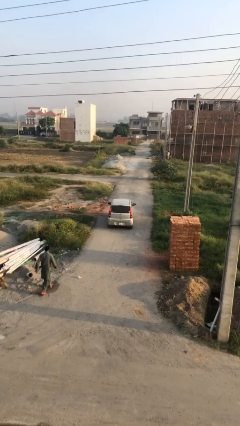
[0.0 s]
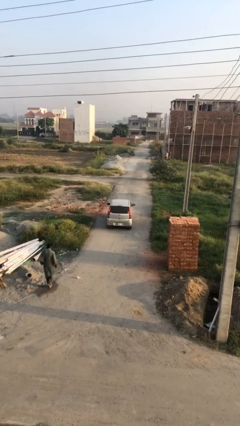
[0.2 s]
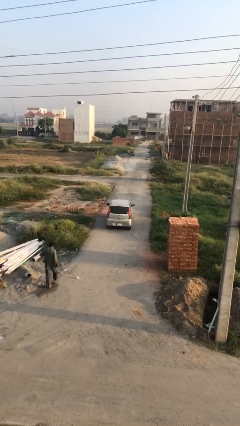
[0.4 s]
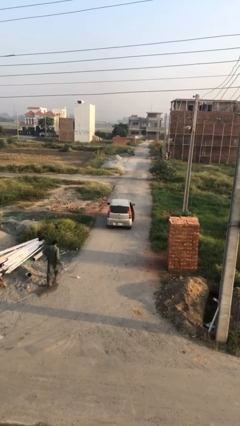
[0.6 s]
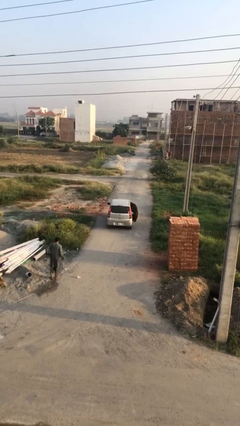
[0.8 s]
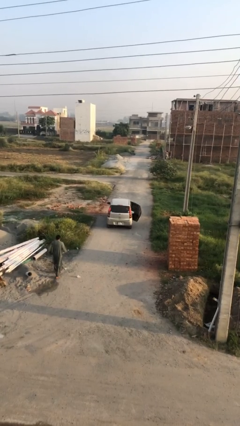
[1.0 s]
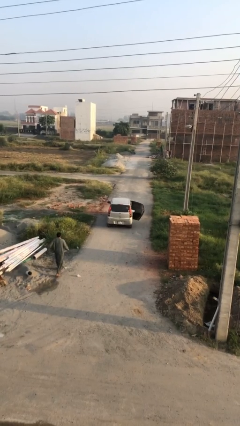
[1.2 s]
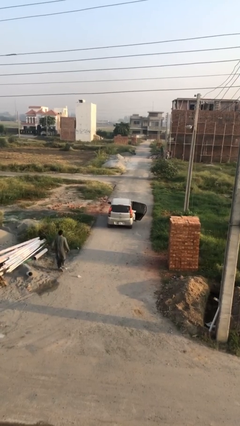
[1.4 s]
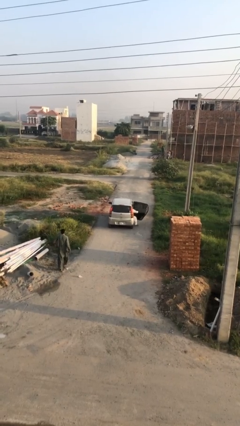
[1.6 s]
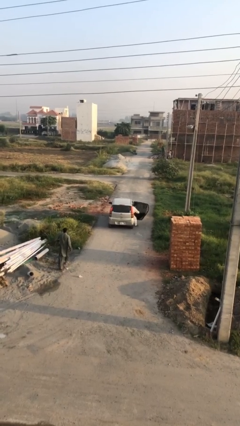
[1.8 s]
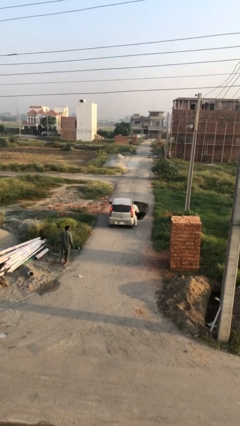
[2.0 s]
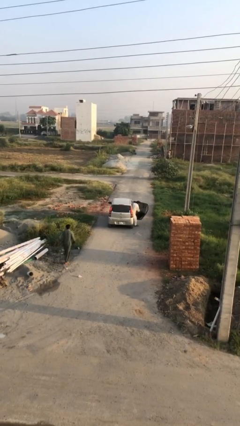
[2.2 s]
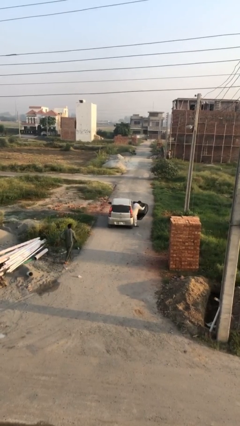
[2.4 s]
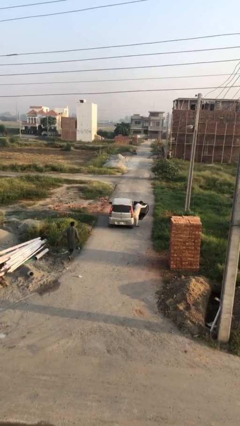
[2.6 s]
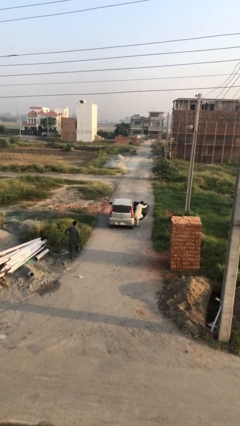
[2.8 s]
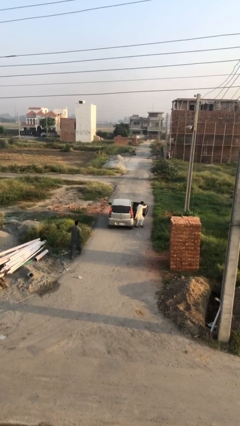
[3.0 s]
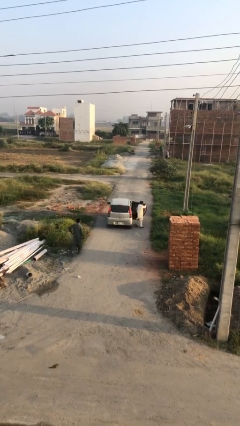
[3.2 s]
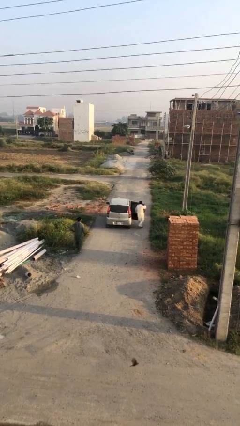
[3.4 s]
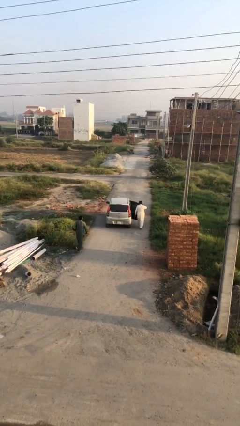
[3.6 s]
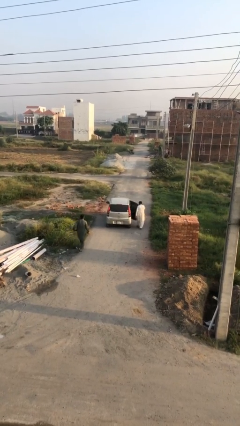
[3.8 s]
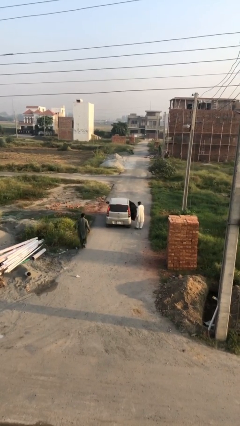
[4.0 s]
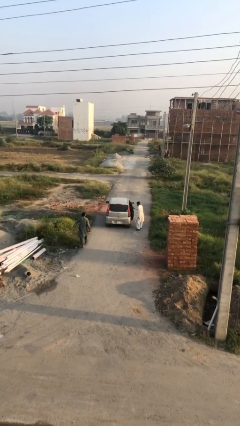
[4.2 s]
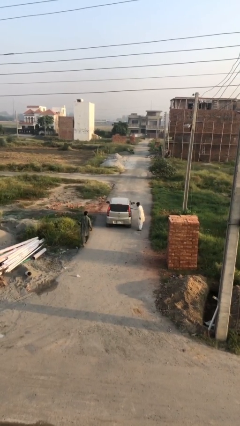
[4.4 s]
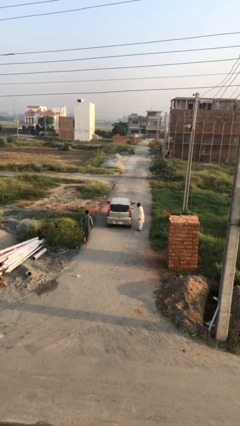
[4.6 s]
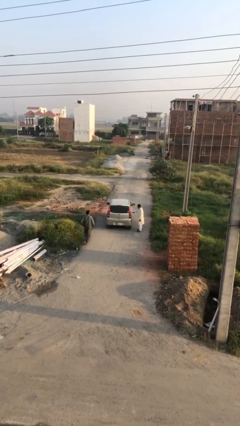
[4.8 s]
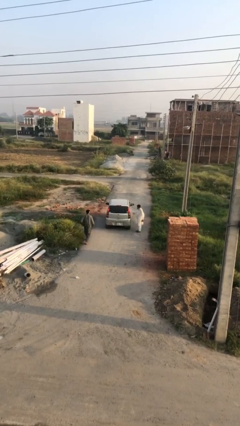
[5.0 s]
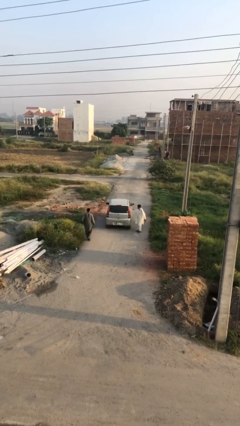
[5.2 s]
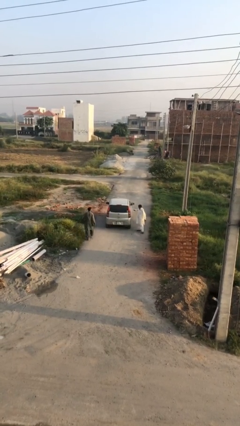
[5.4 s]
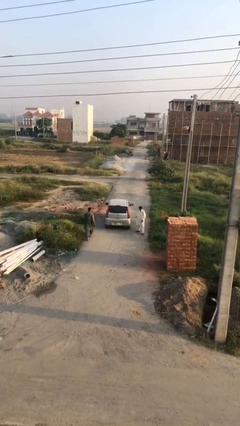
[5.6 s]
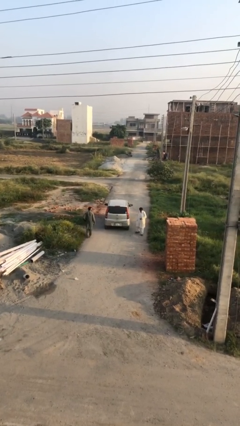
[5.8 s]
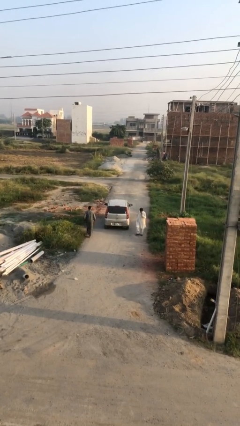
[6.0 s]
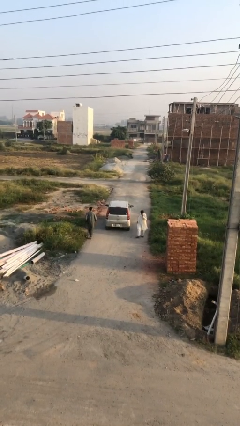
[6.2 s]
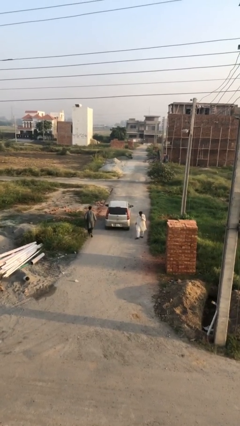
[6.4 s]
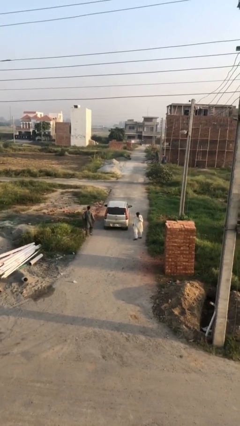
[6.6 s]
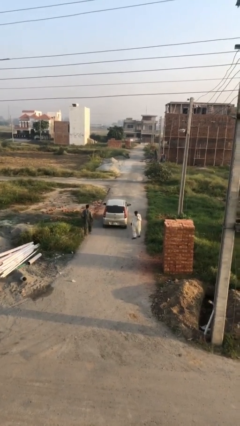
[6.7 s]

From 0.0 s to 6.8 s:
car drops off person

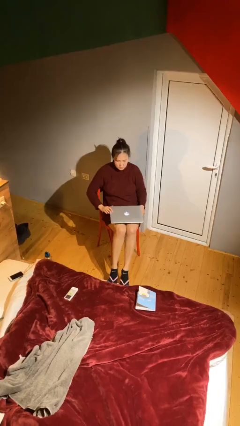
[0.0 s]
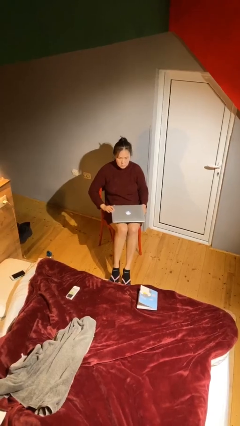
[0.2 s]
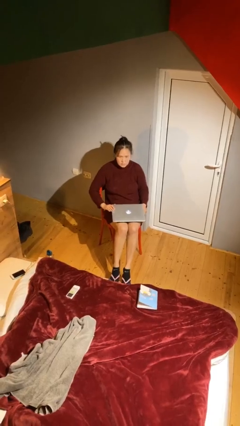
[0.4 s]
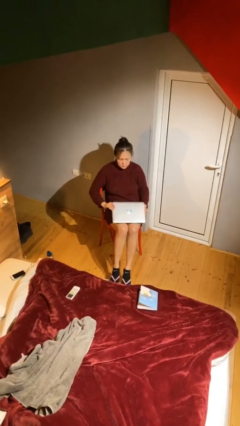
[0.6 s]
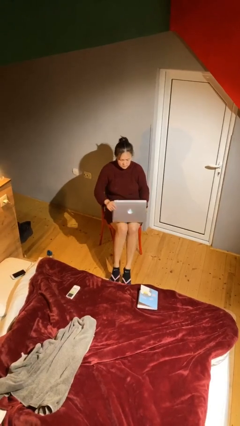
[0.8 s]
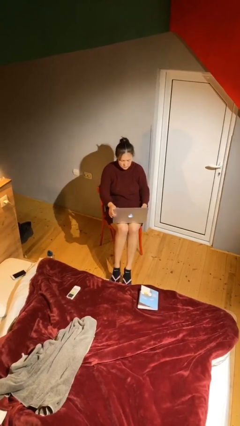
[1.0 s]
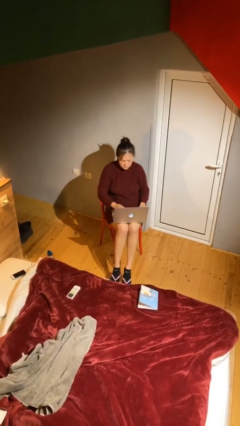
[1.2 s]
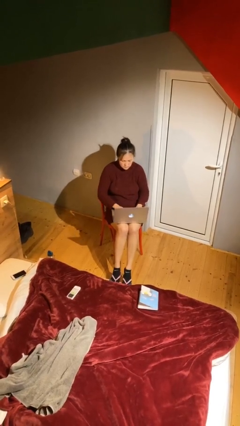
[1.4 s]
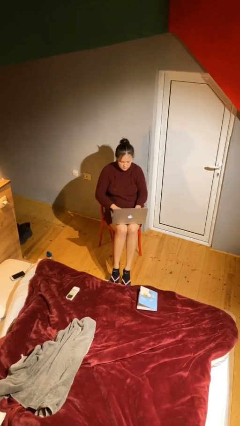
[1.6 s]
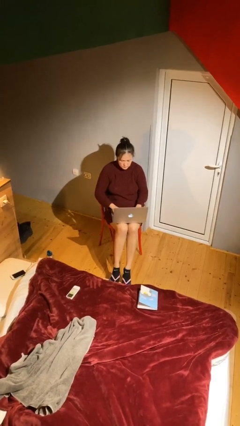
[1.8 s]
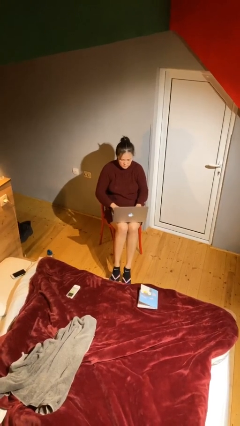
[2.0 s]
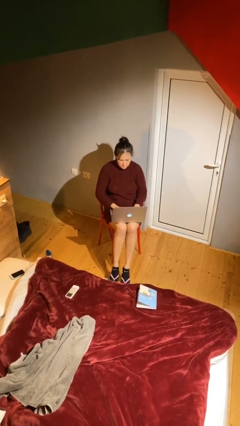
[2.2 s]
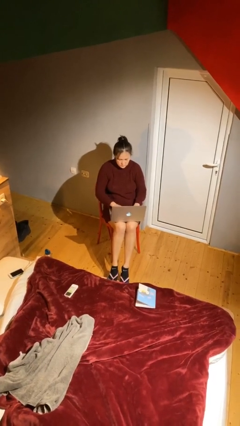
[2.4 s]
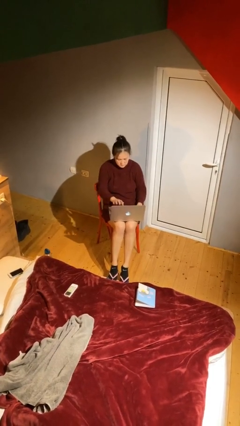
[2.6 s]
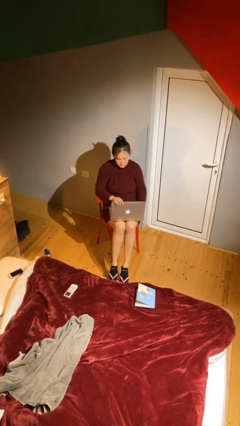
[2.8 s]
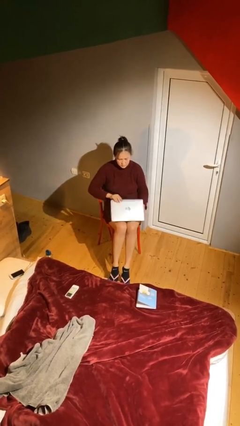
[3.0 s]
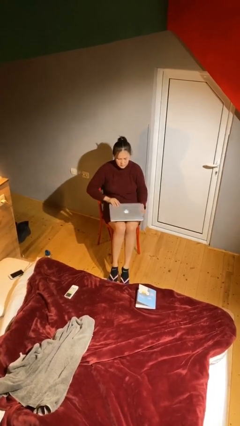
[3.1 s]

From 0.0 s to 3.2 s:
person interacts with laptop

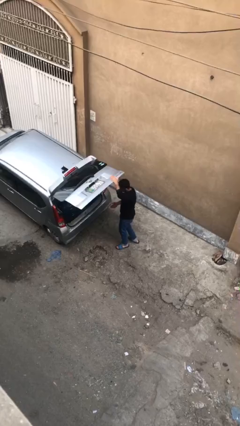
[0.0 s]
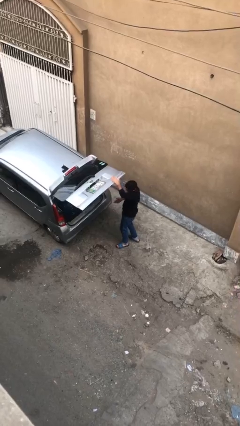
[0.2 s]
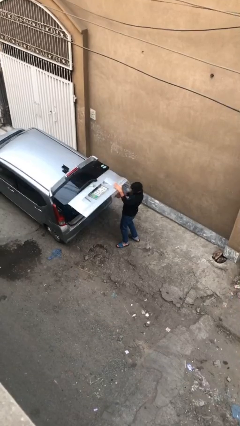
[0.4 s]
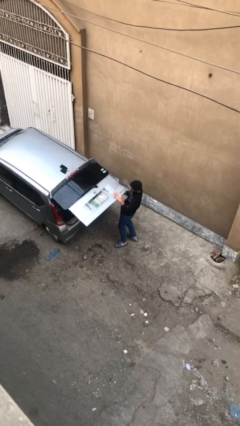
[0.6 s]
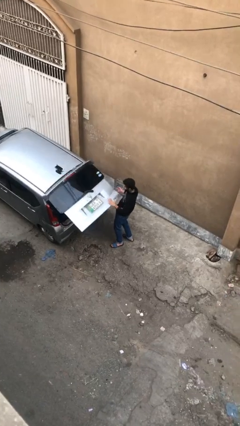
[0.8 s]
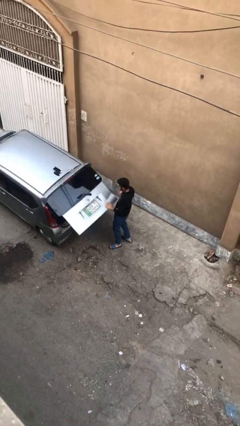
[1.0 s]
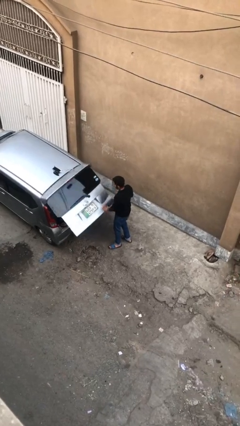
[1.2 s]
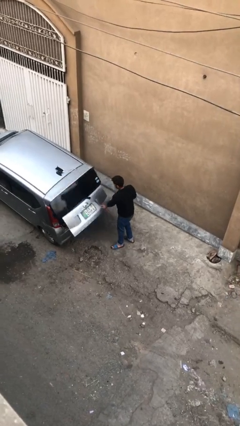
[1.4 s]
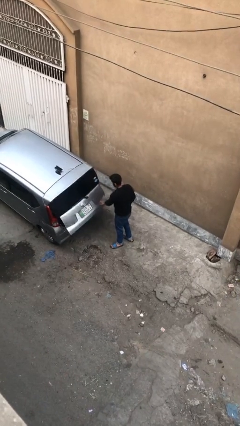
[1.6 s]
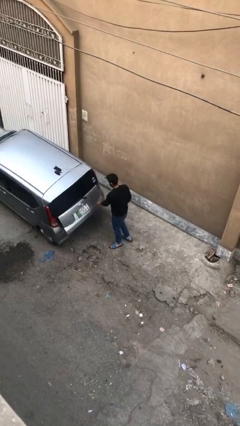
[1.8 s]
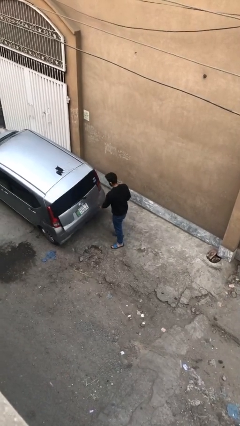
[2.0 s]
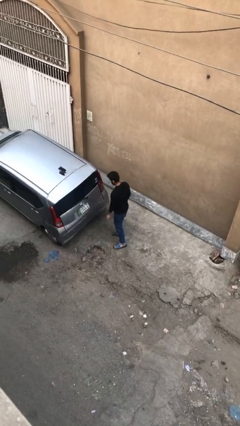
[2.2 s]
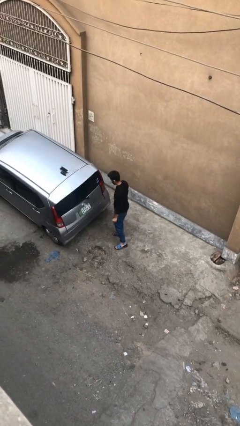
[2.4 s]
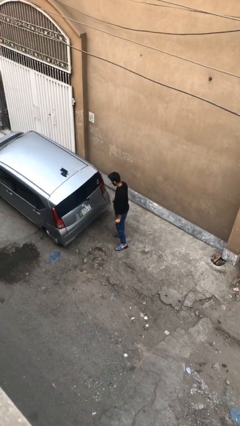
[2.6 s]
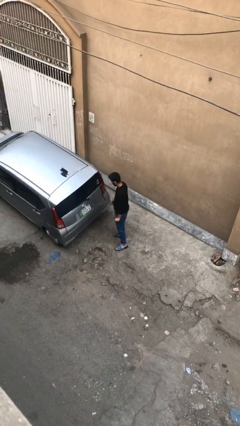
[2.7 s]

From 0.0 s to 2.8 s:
person closes car trunk

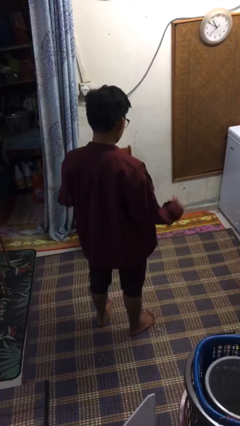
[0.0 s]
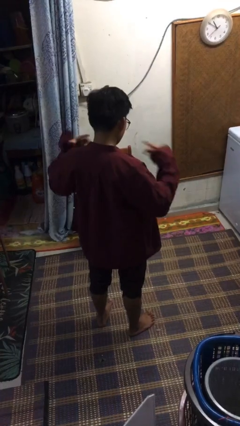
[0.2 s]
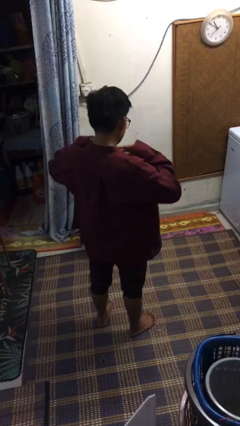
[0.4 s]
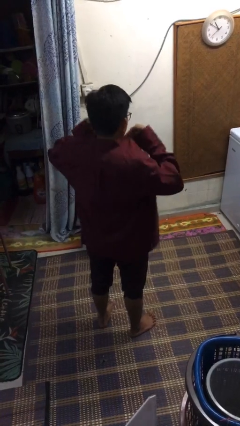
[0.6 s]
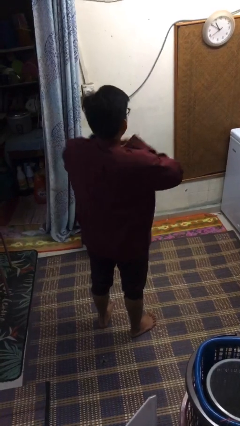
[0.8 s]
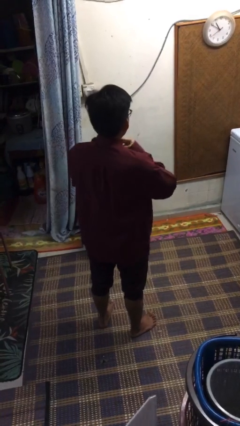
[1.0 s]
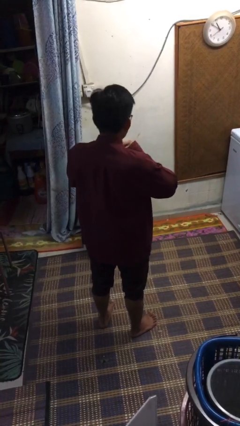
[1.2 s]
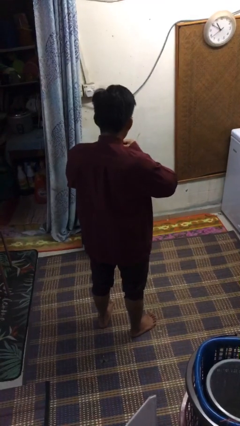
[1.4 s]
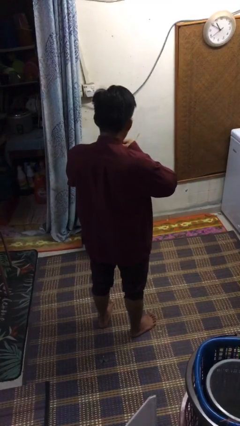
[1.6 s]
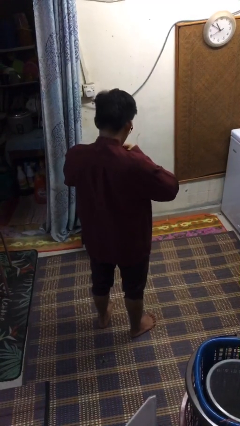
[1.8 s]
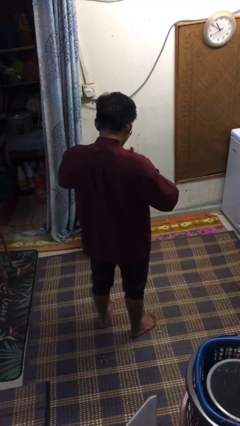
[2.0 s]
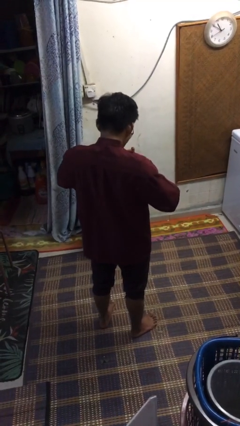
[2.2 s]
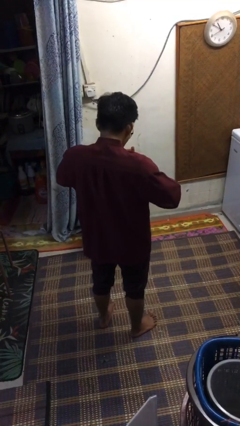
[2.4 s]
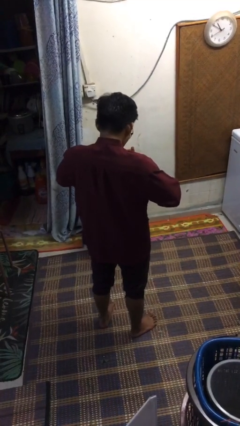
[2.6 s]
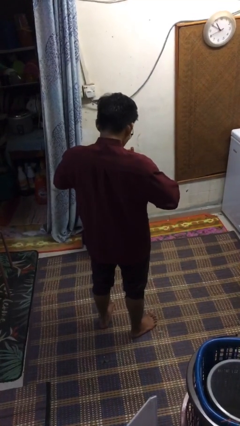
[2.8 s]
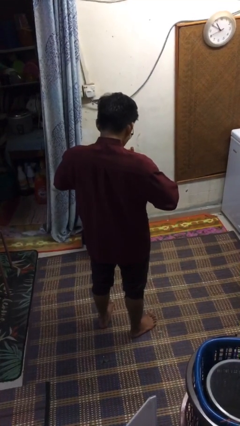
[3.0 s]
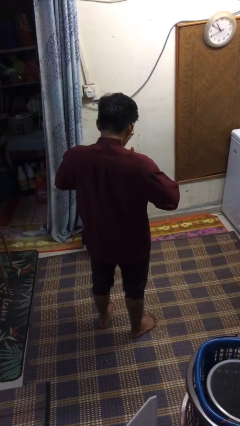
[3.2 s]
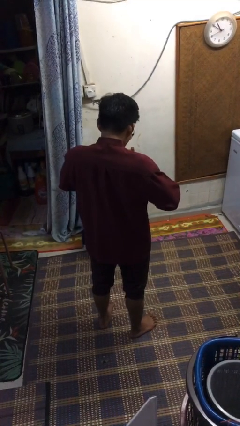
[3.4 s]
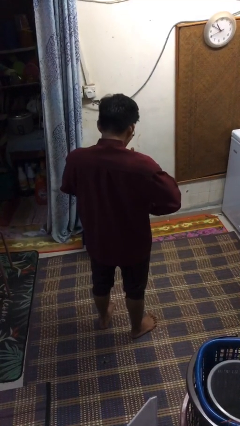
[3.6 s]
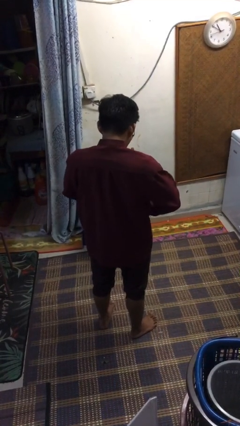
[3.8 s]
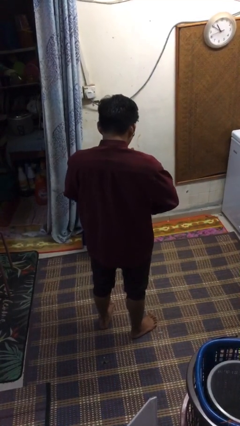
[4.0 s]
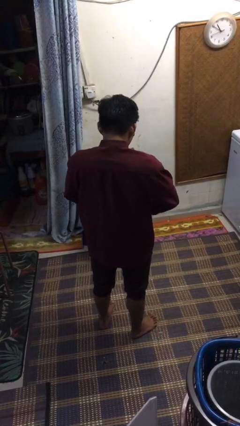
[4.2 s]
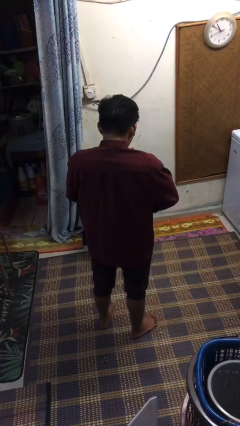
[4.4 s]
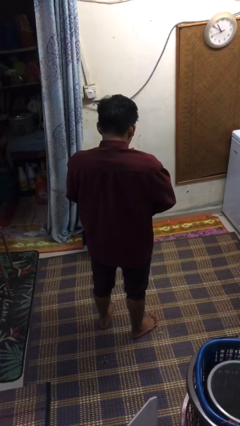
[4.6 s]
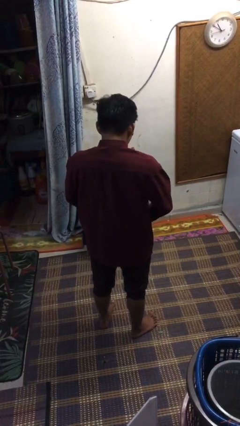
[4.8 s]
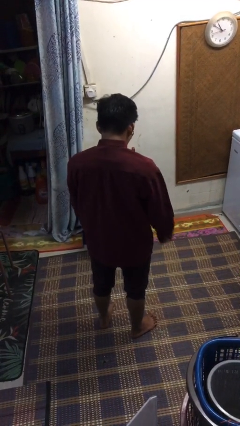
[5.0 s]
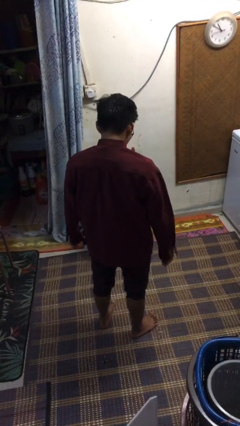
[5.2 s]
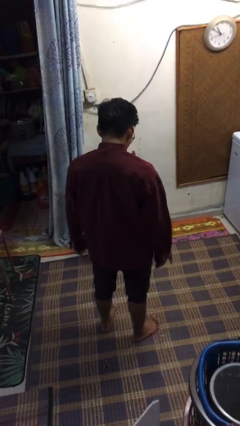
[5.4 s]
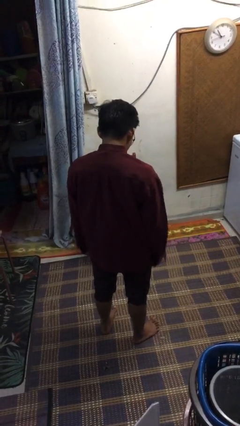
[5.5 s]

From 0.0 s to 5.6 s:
person buttons shirt
